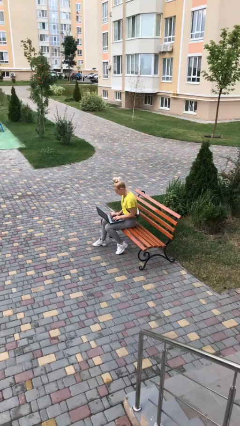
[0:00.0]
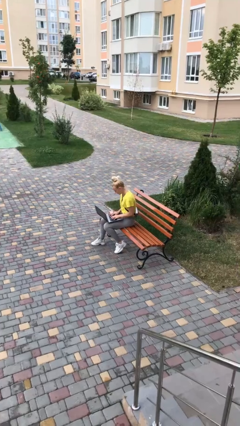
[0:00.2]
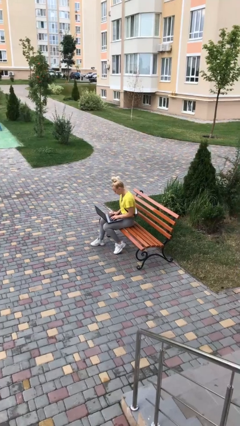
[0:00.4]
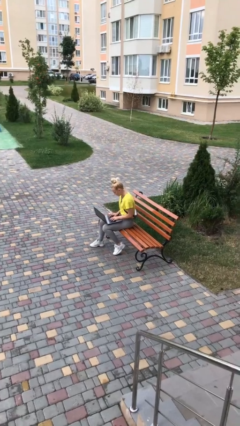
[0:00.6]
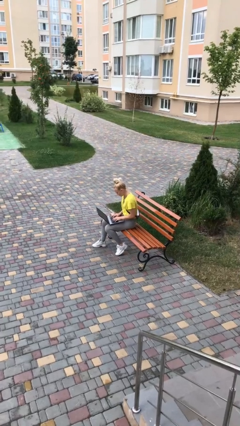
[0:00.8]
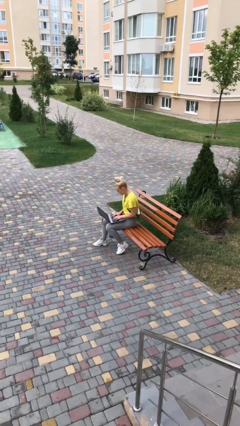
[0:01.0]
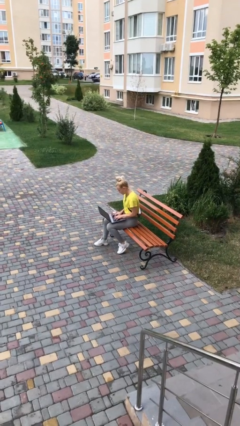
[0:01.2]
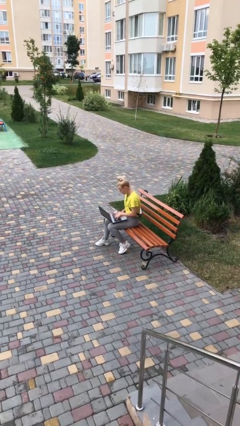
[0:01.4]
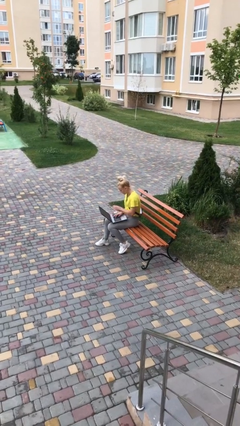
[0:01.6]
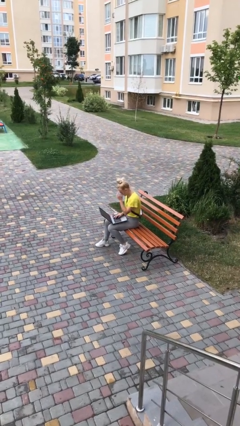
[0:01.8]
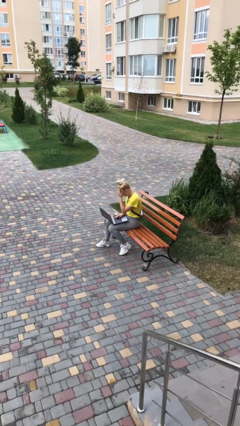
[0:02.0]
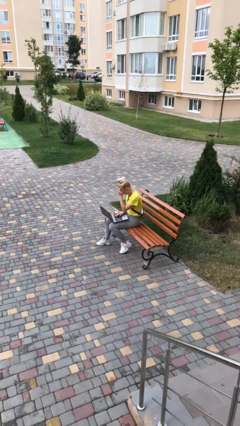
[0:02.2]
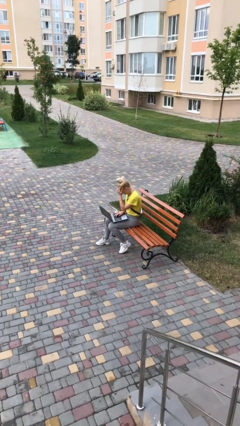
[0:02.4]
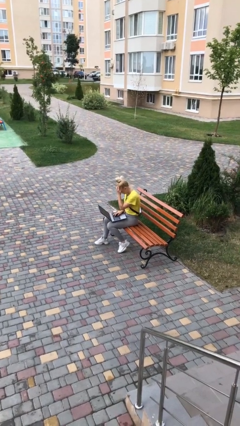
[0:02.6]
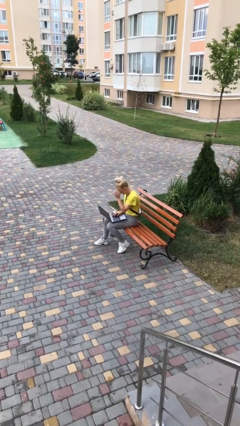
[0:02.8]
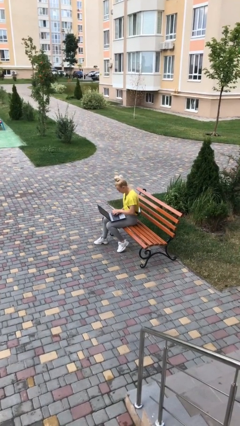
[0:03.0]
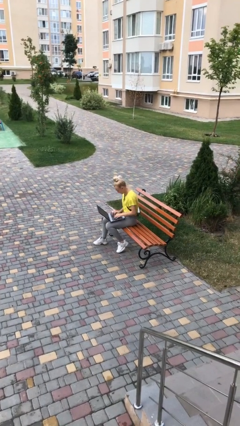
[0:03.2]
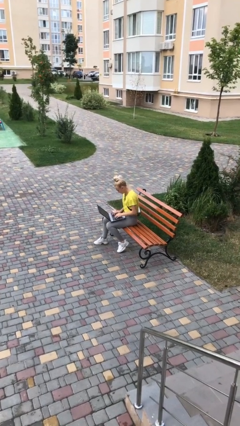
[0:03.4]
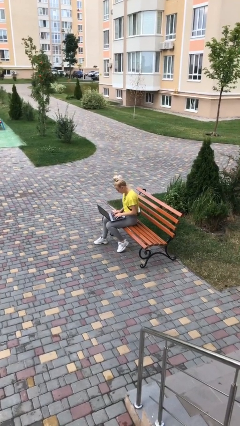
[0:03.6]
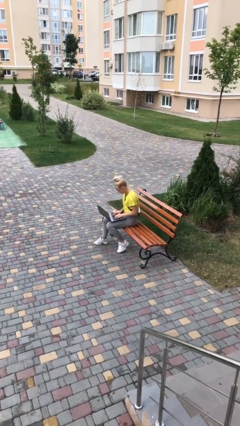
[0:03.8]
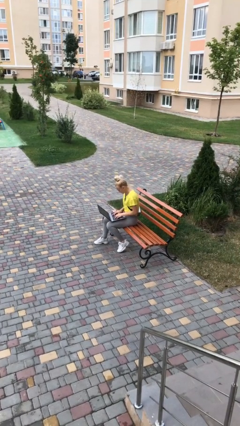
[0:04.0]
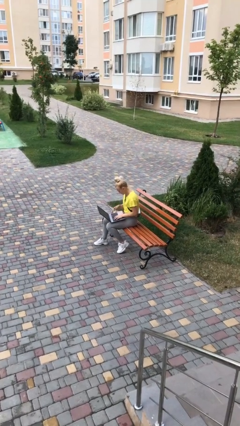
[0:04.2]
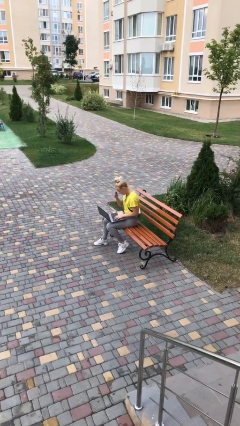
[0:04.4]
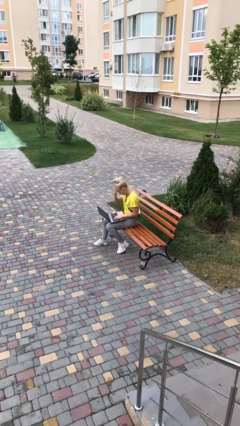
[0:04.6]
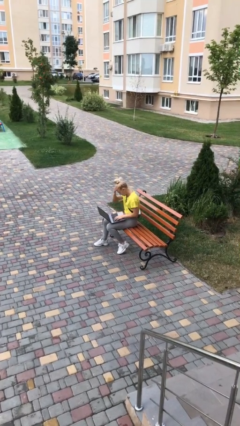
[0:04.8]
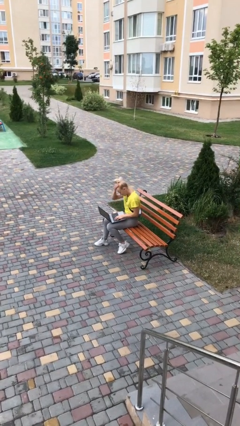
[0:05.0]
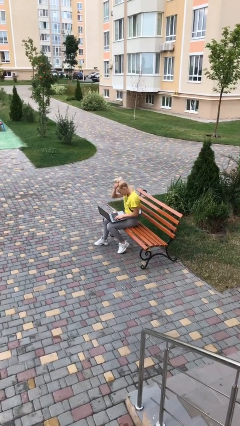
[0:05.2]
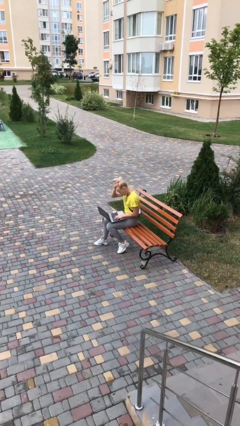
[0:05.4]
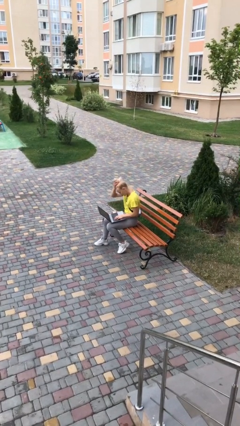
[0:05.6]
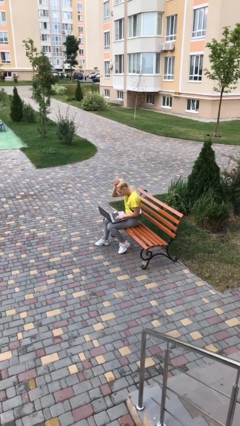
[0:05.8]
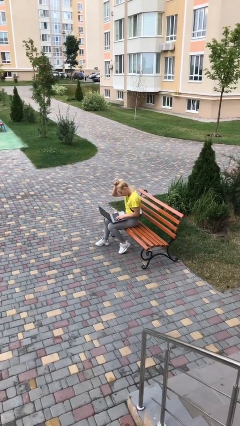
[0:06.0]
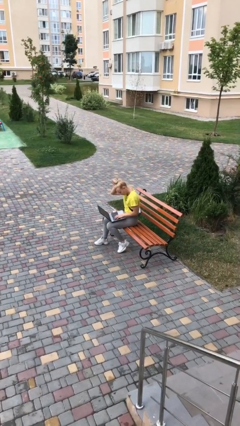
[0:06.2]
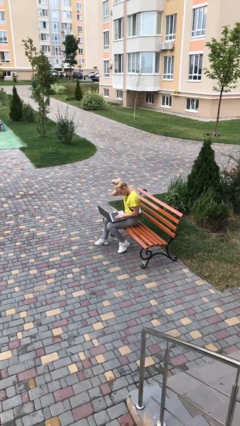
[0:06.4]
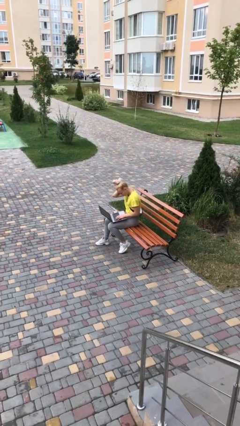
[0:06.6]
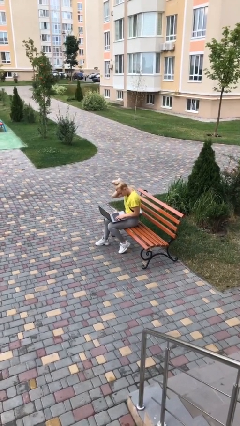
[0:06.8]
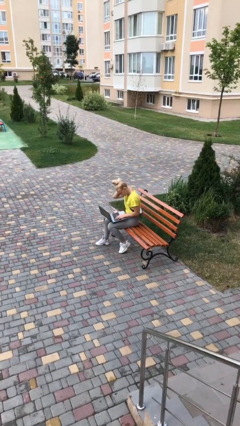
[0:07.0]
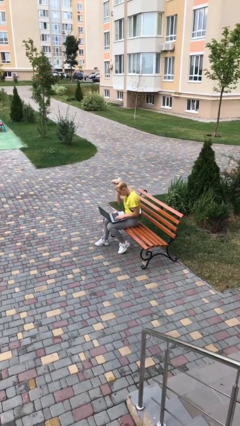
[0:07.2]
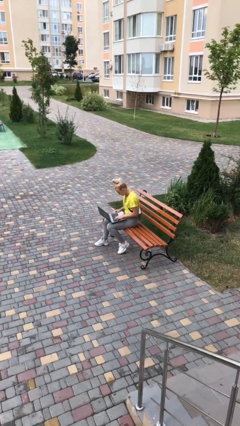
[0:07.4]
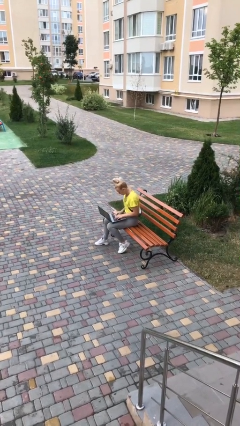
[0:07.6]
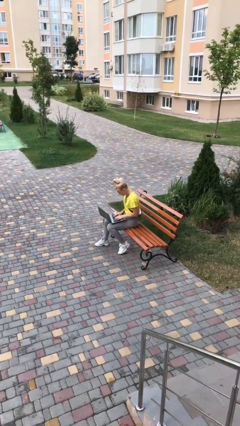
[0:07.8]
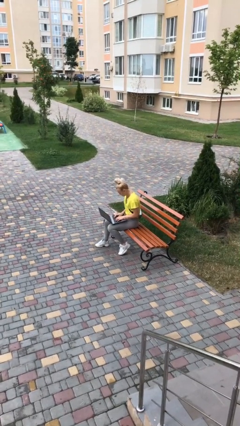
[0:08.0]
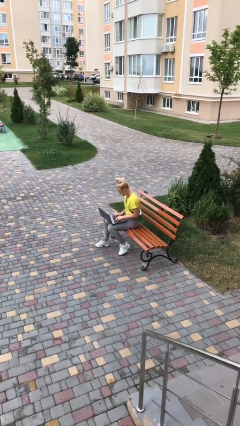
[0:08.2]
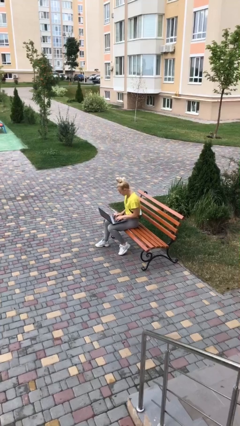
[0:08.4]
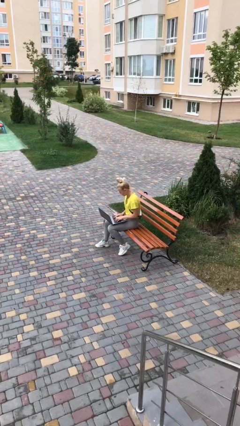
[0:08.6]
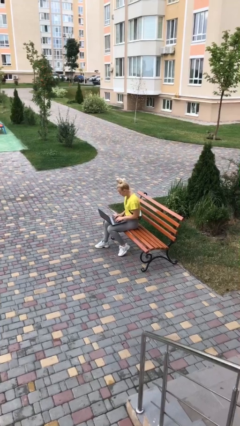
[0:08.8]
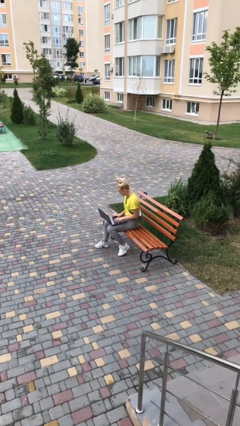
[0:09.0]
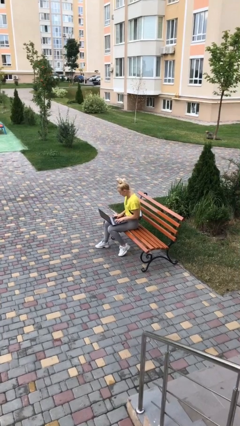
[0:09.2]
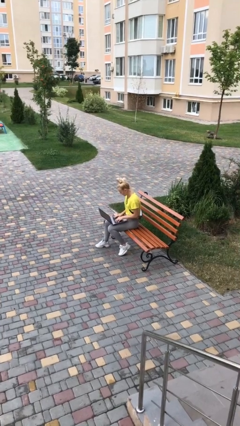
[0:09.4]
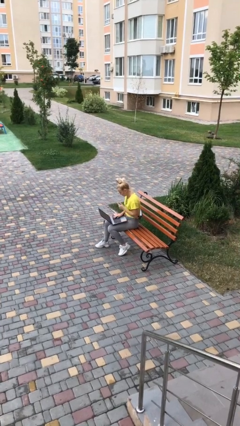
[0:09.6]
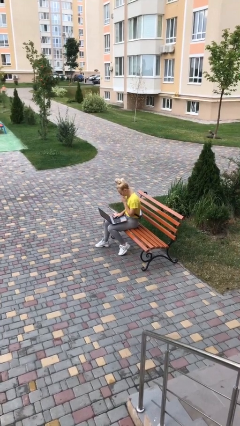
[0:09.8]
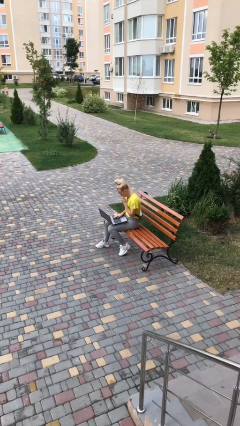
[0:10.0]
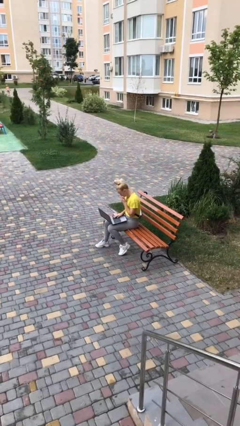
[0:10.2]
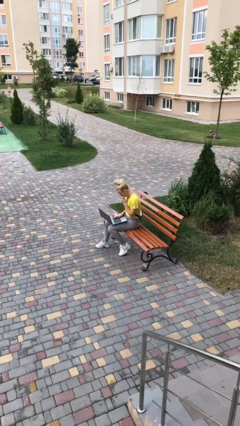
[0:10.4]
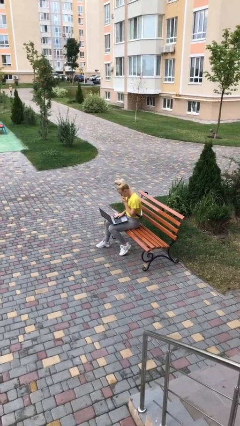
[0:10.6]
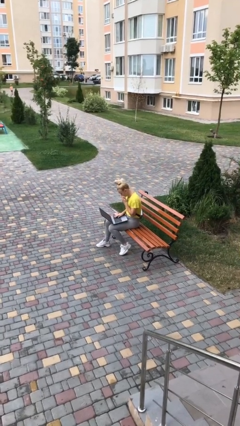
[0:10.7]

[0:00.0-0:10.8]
person interacts with laptop

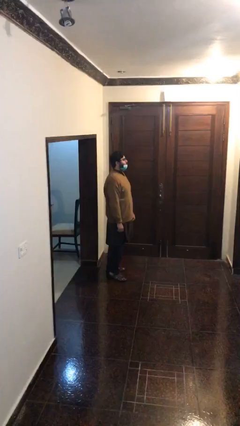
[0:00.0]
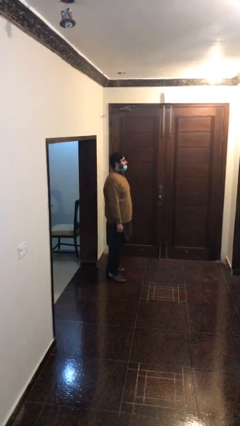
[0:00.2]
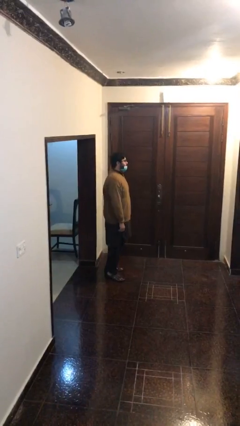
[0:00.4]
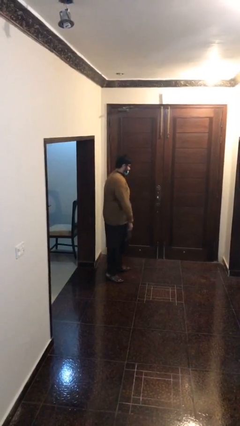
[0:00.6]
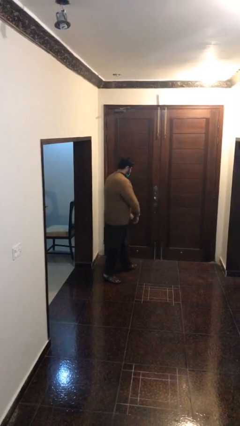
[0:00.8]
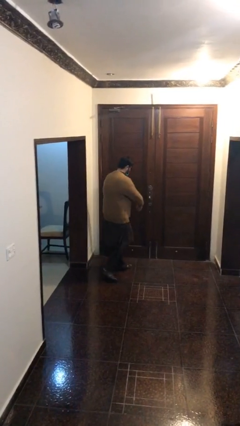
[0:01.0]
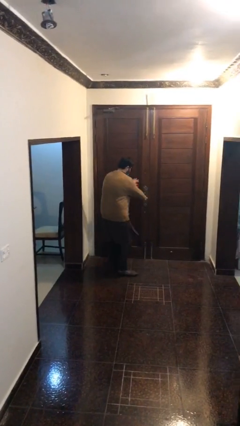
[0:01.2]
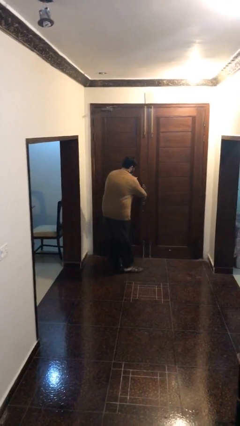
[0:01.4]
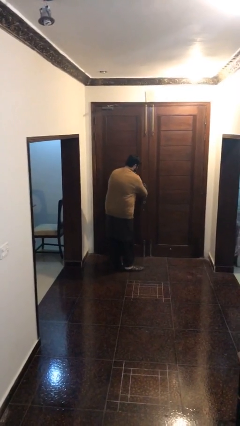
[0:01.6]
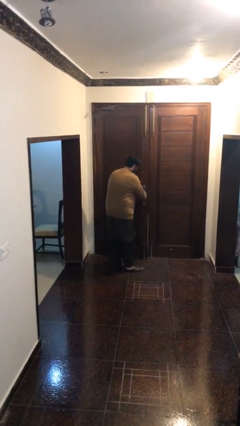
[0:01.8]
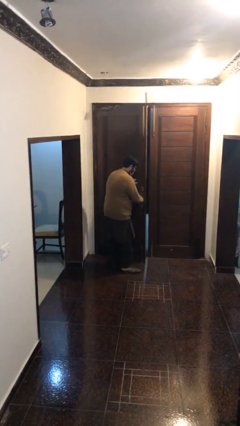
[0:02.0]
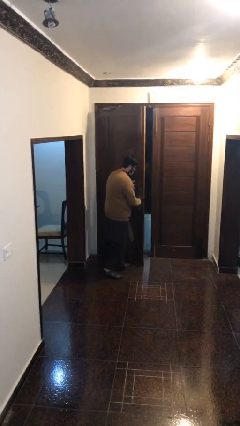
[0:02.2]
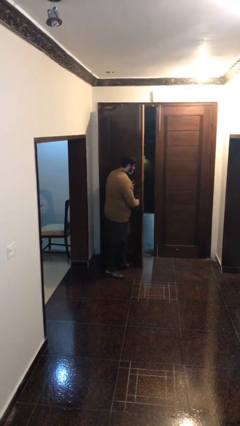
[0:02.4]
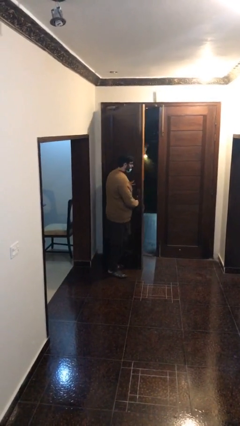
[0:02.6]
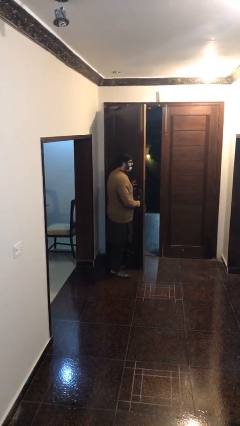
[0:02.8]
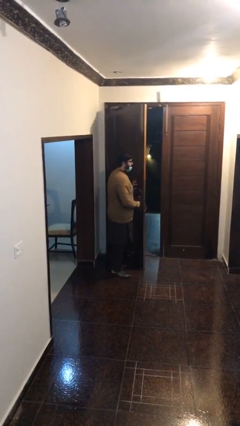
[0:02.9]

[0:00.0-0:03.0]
person opens facility door

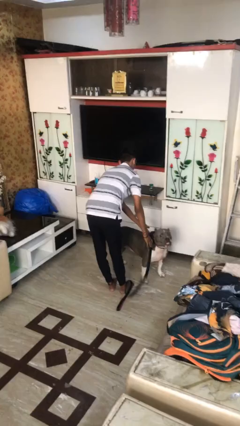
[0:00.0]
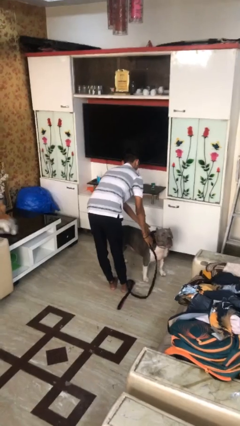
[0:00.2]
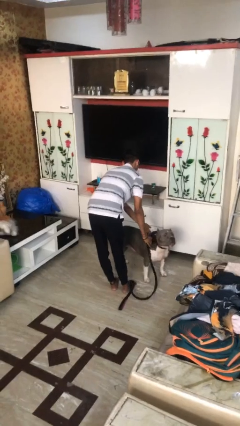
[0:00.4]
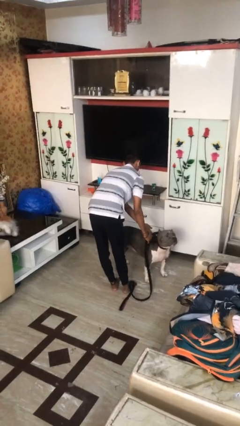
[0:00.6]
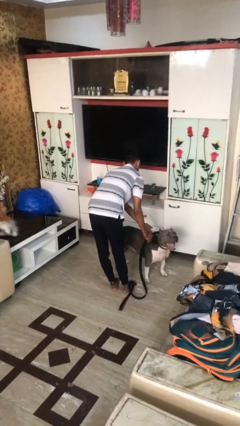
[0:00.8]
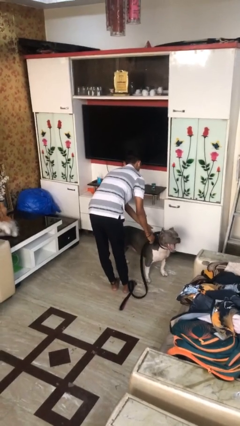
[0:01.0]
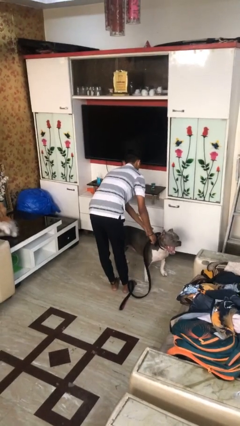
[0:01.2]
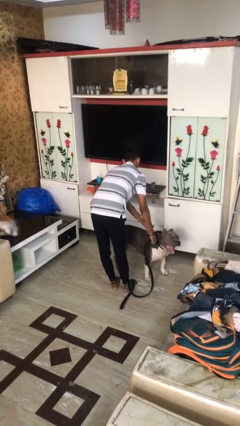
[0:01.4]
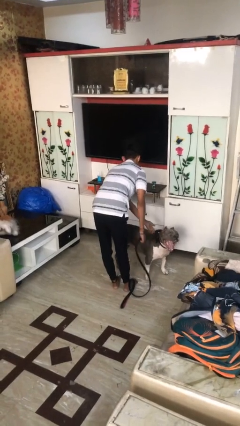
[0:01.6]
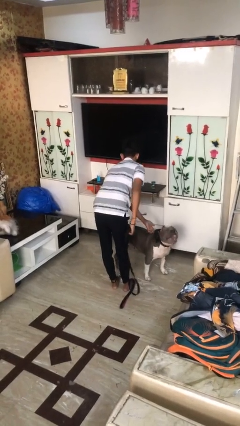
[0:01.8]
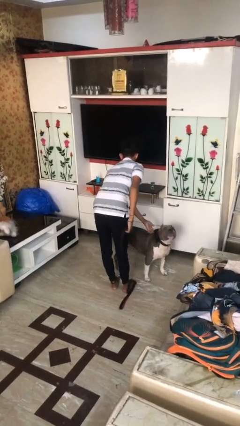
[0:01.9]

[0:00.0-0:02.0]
person unattaches leash from dog

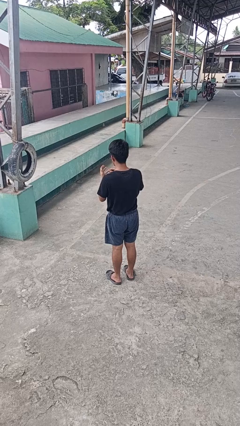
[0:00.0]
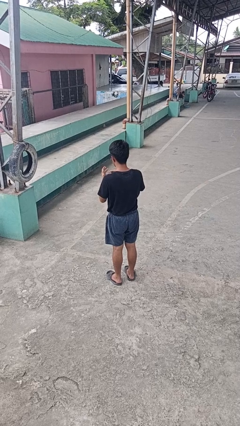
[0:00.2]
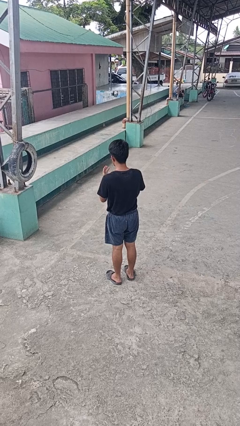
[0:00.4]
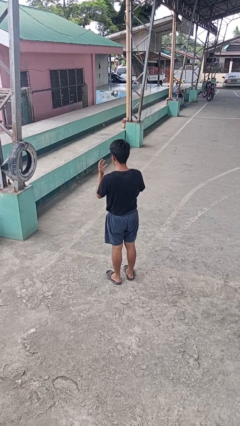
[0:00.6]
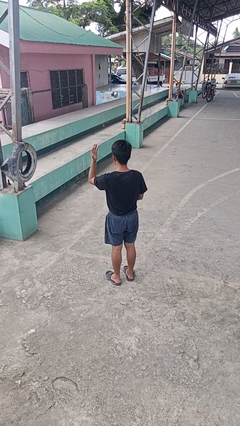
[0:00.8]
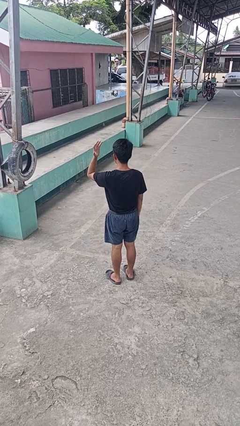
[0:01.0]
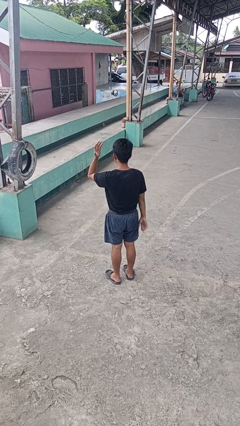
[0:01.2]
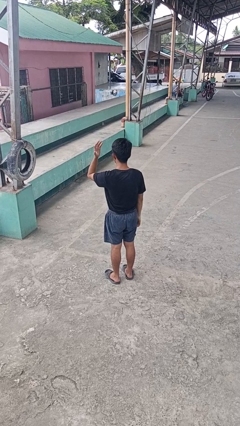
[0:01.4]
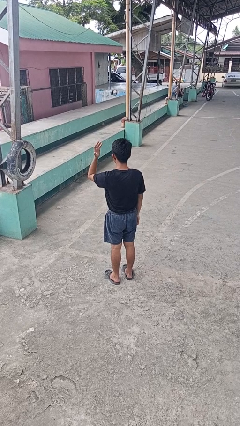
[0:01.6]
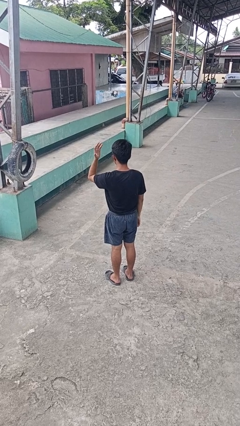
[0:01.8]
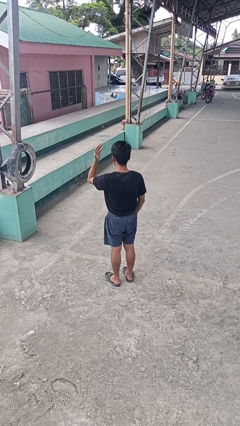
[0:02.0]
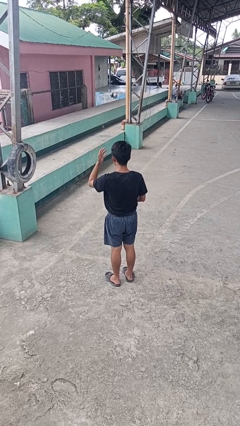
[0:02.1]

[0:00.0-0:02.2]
person puts on ring
